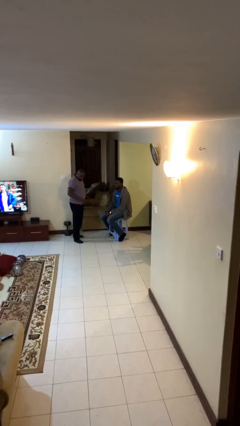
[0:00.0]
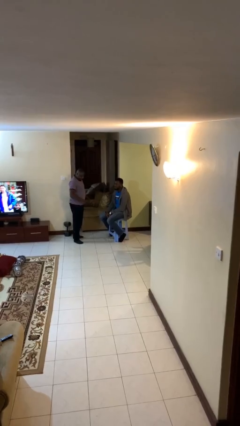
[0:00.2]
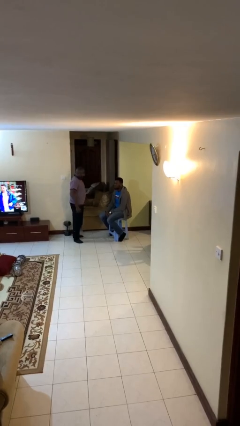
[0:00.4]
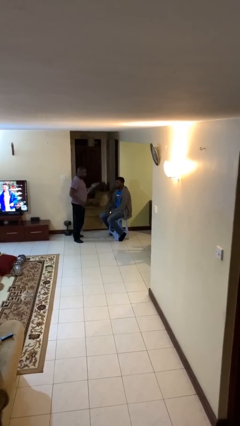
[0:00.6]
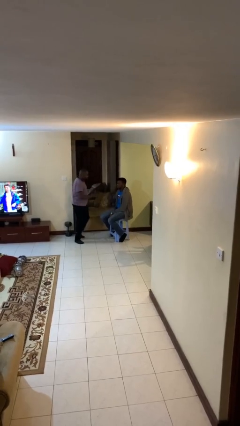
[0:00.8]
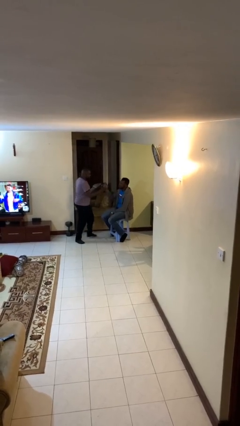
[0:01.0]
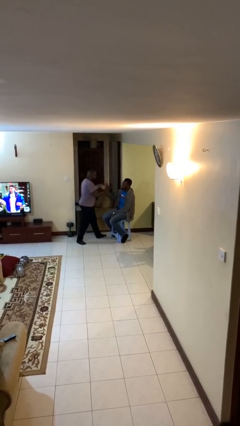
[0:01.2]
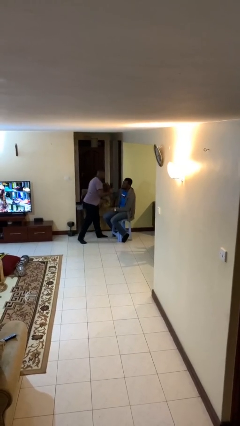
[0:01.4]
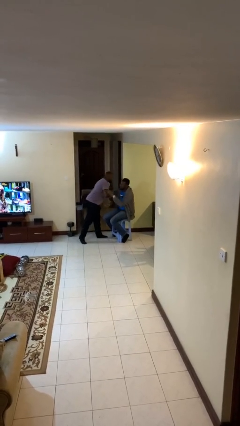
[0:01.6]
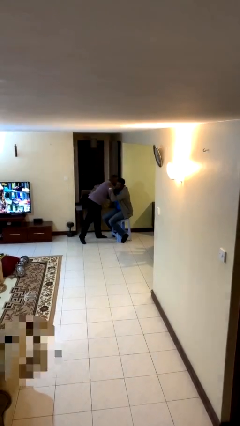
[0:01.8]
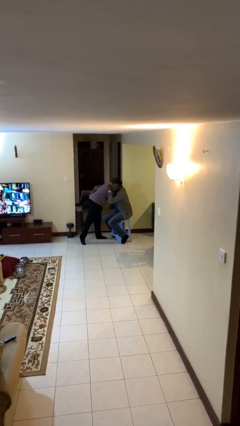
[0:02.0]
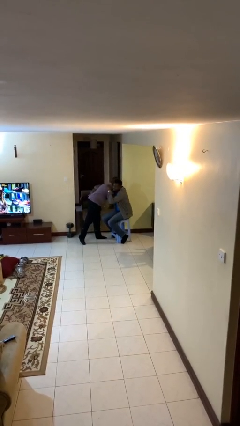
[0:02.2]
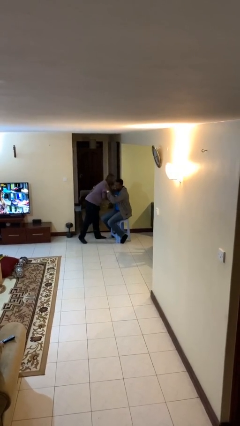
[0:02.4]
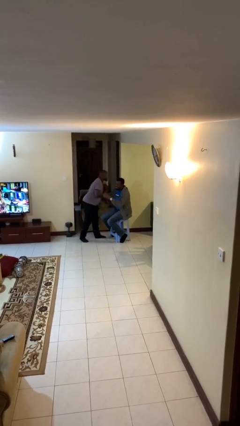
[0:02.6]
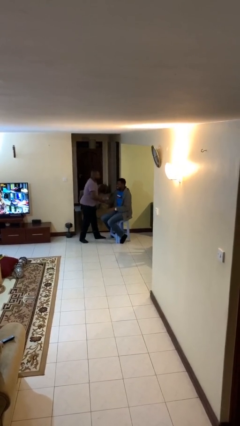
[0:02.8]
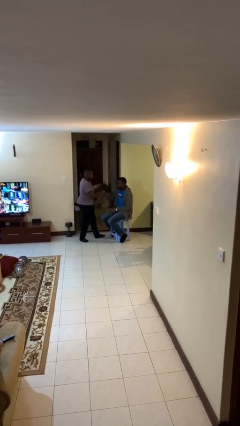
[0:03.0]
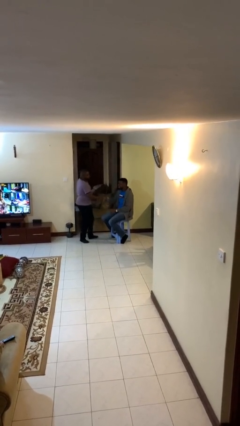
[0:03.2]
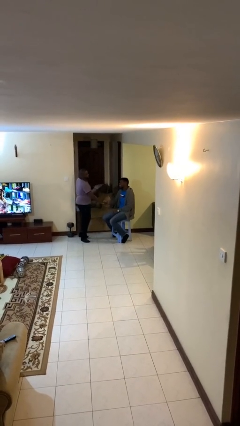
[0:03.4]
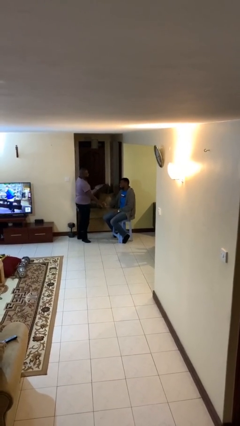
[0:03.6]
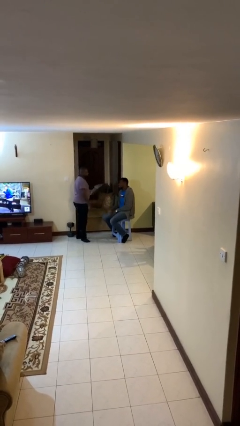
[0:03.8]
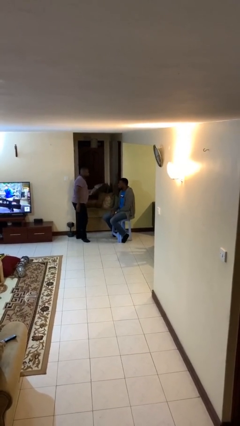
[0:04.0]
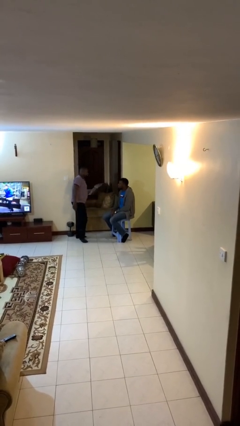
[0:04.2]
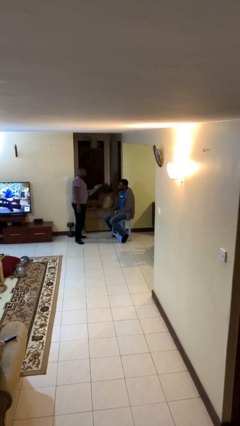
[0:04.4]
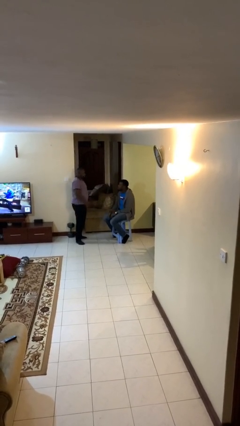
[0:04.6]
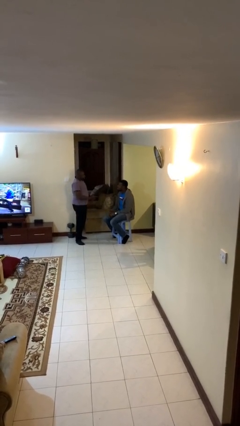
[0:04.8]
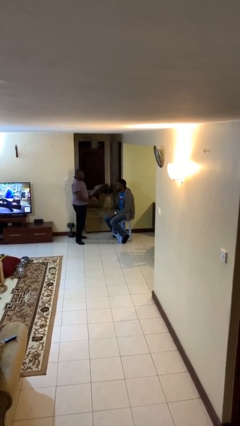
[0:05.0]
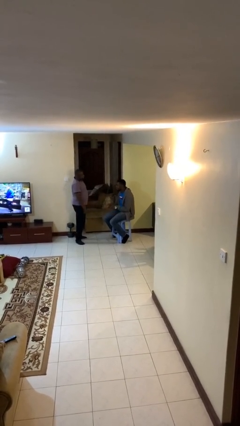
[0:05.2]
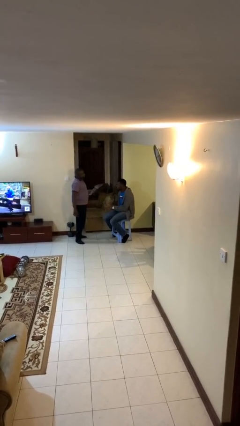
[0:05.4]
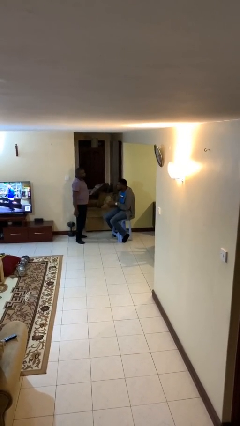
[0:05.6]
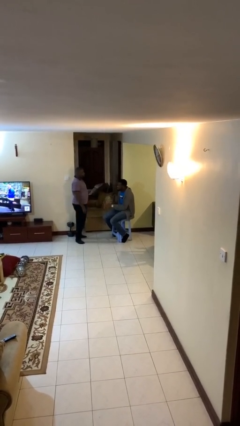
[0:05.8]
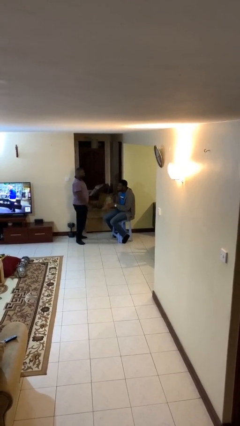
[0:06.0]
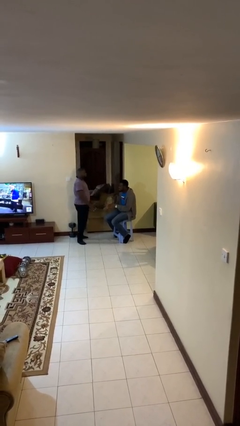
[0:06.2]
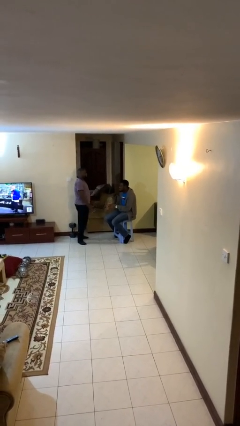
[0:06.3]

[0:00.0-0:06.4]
person embraces person

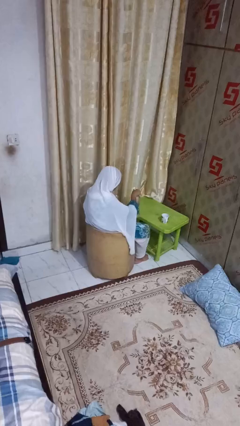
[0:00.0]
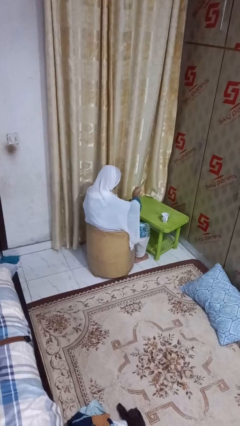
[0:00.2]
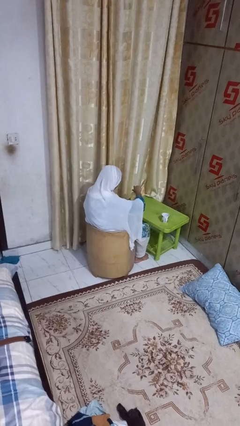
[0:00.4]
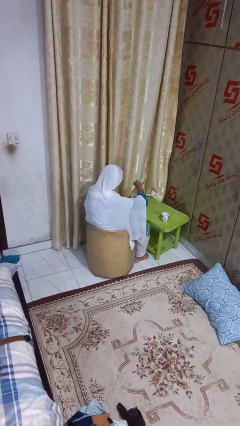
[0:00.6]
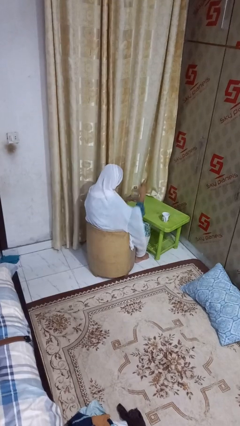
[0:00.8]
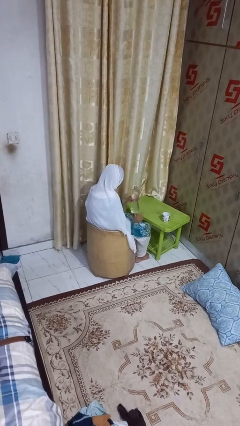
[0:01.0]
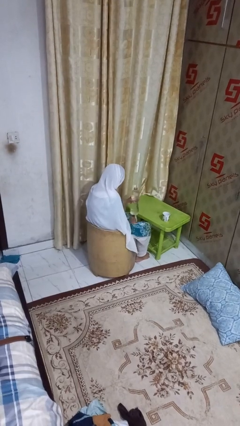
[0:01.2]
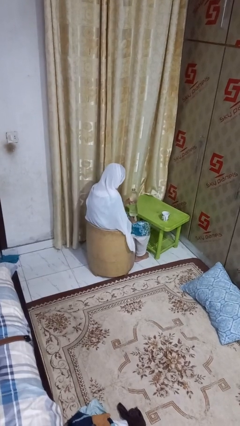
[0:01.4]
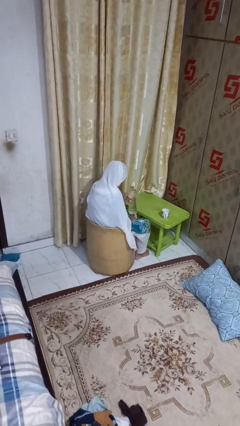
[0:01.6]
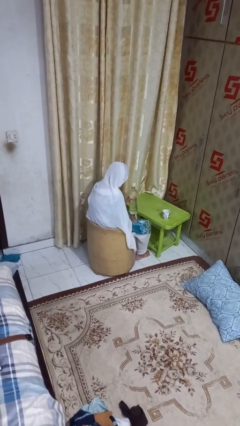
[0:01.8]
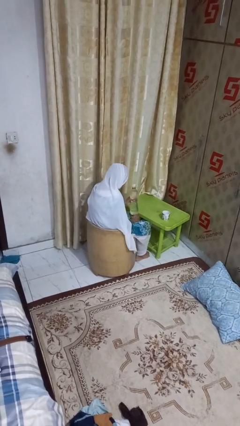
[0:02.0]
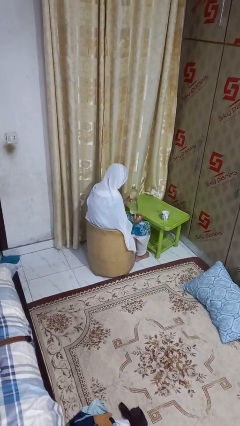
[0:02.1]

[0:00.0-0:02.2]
person unscrews lid from bottle

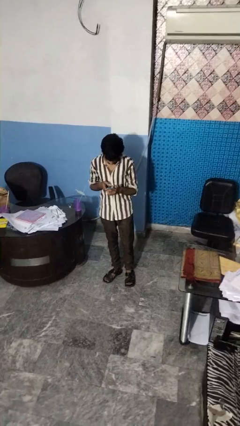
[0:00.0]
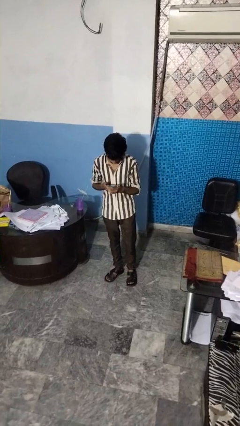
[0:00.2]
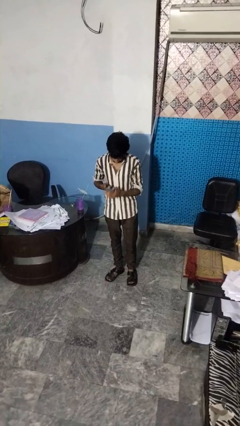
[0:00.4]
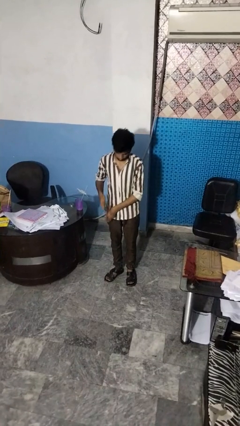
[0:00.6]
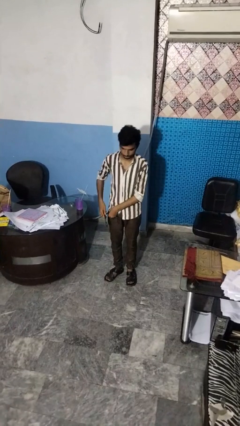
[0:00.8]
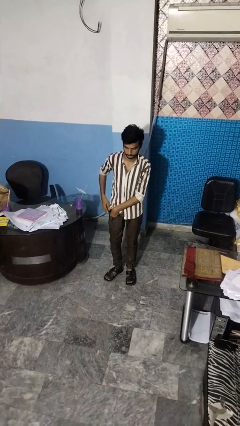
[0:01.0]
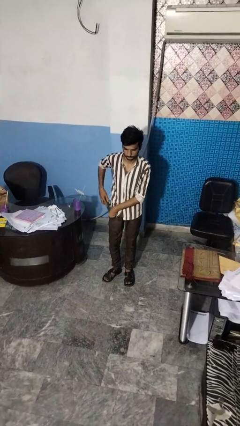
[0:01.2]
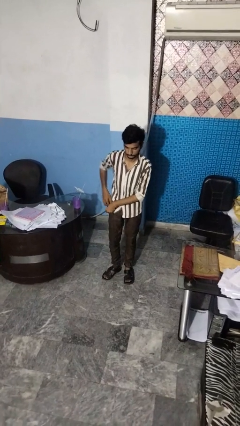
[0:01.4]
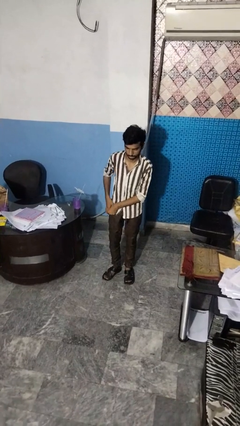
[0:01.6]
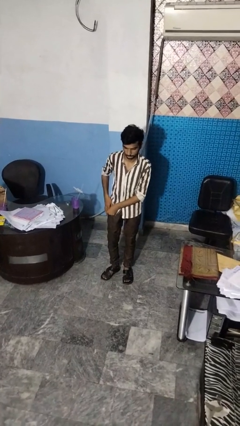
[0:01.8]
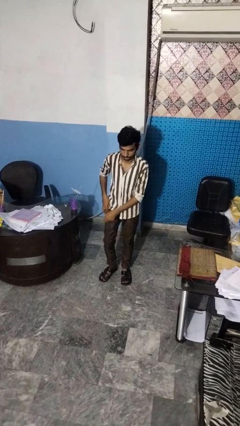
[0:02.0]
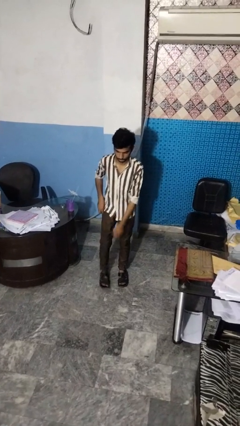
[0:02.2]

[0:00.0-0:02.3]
person puts phone into pocket

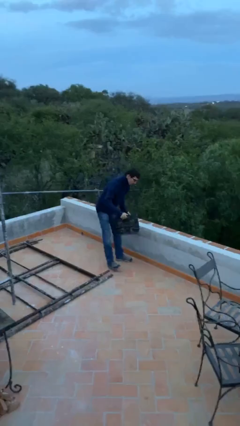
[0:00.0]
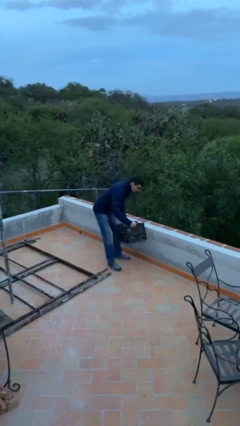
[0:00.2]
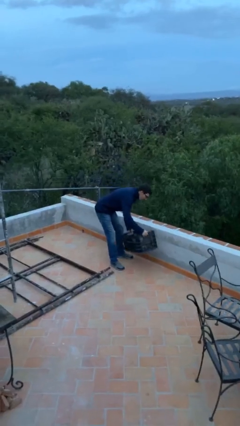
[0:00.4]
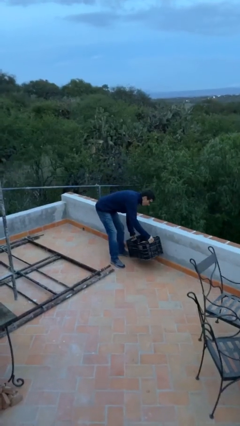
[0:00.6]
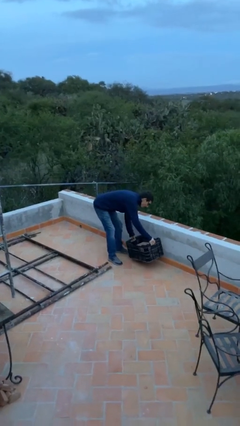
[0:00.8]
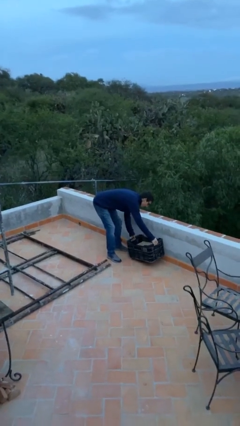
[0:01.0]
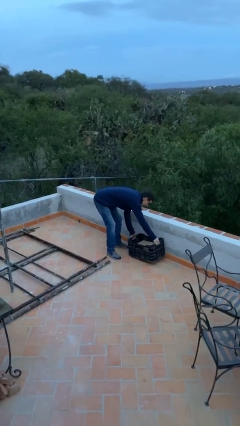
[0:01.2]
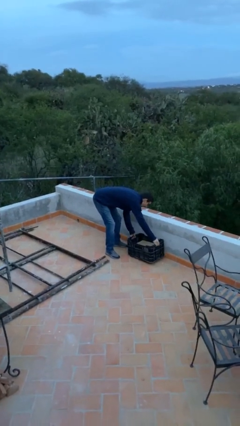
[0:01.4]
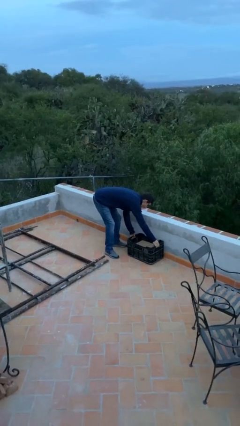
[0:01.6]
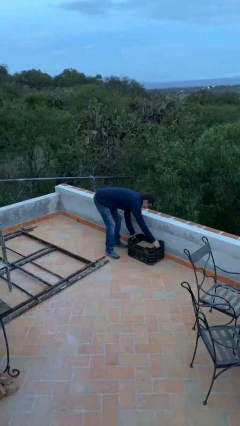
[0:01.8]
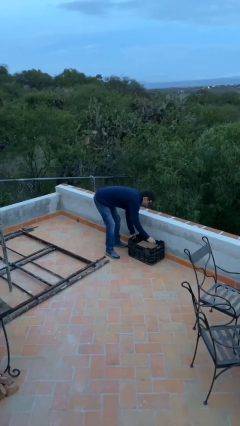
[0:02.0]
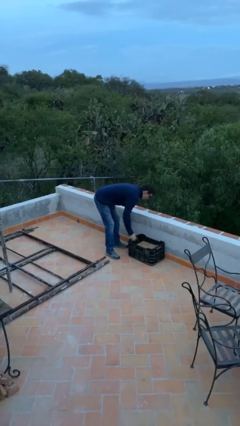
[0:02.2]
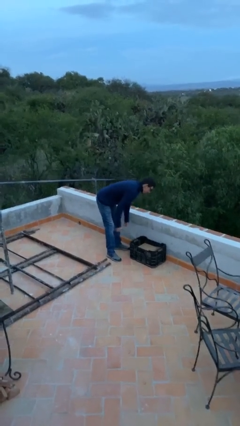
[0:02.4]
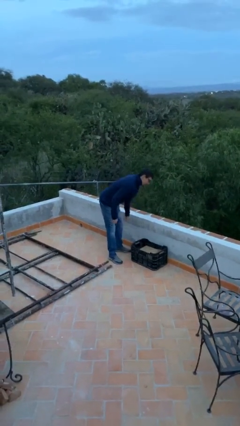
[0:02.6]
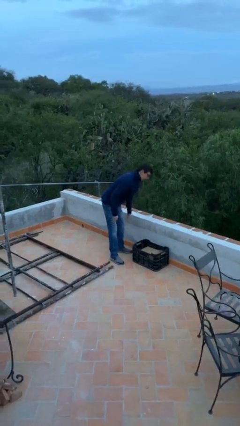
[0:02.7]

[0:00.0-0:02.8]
person puts down object on floor

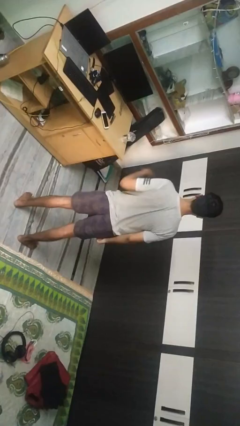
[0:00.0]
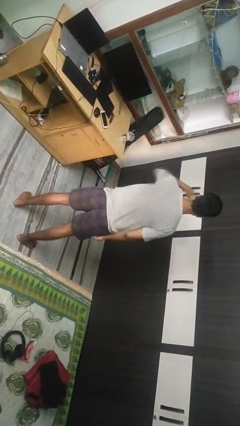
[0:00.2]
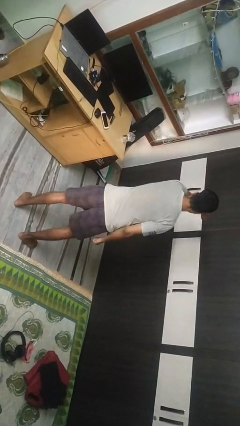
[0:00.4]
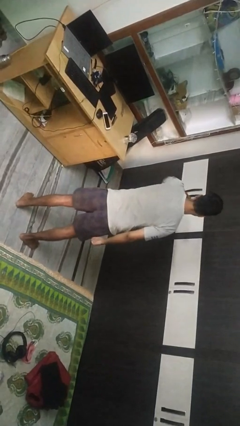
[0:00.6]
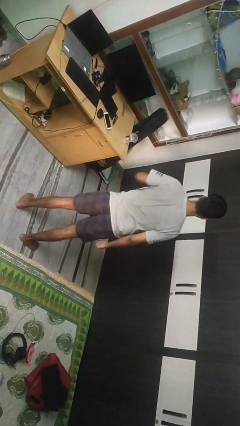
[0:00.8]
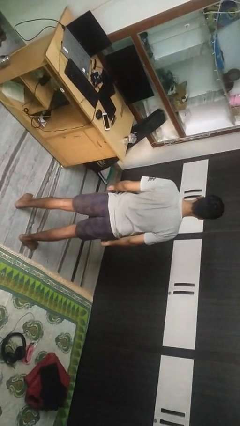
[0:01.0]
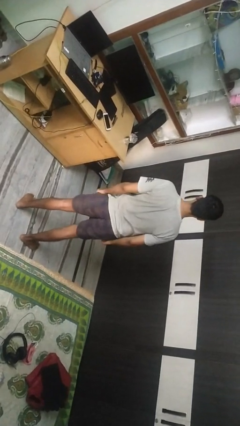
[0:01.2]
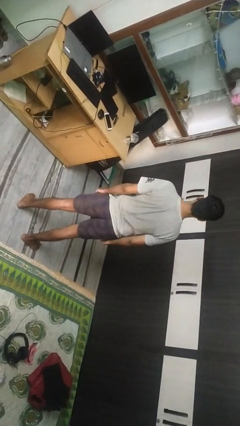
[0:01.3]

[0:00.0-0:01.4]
person punches

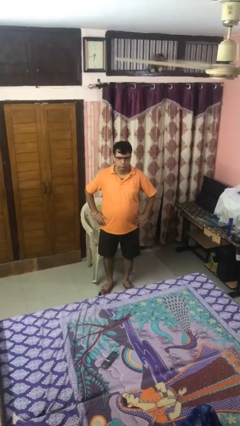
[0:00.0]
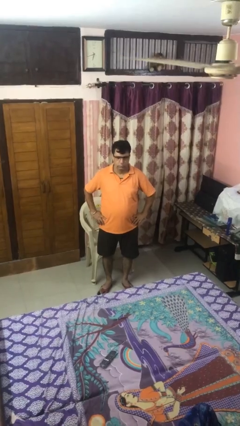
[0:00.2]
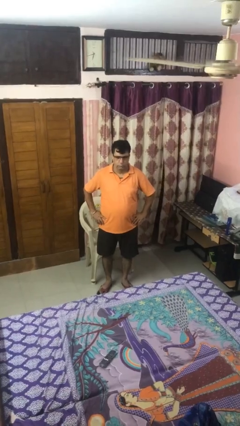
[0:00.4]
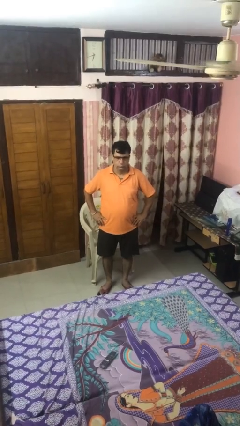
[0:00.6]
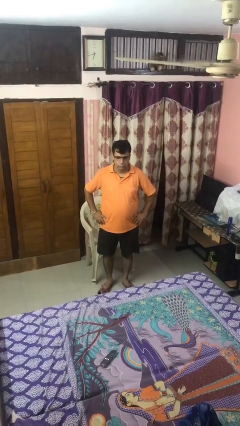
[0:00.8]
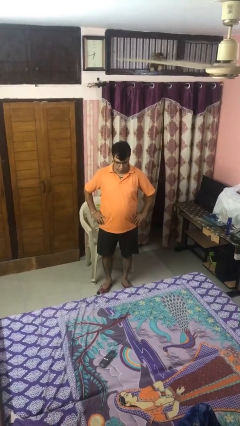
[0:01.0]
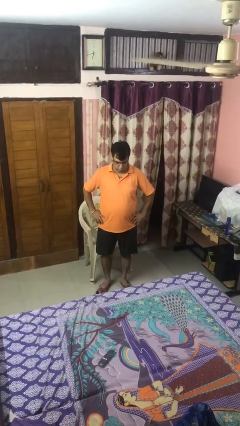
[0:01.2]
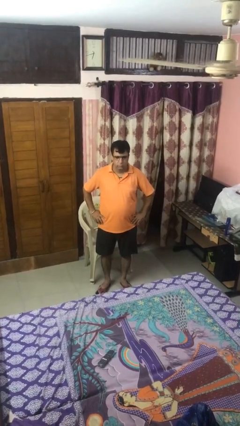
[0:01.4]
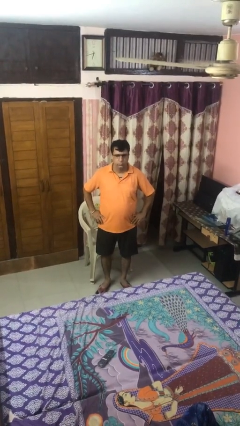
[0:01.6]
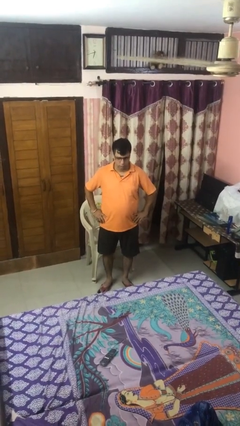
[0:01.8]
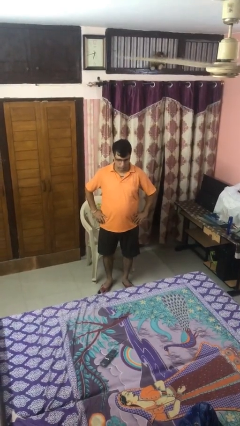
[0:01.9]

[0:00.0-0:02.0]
person nods head
